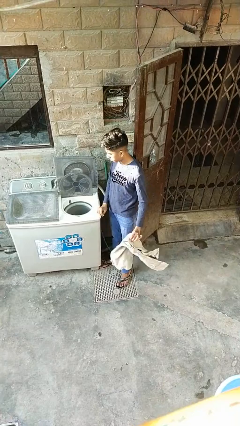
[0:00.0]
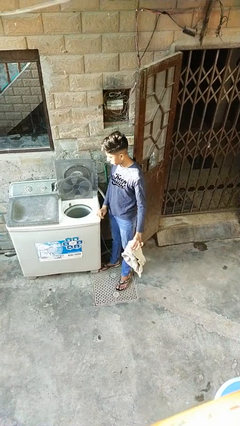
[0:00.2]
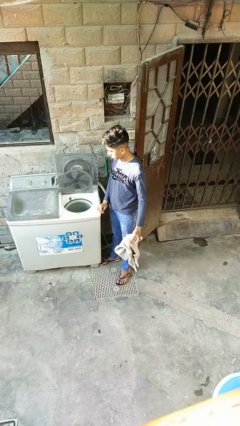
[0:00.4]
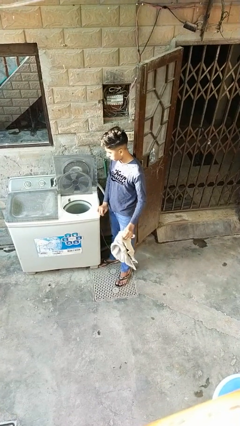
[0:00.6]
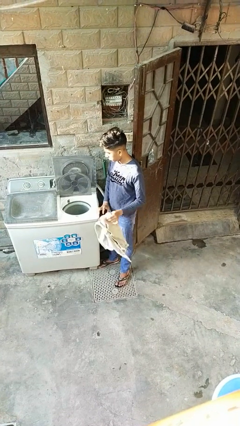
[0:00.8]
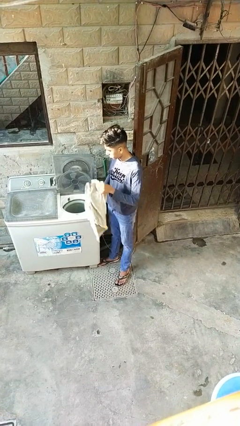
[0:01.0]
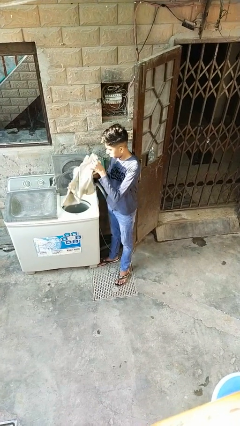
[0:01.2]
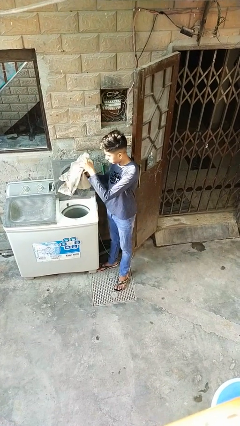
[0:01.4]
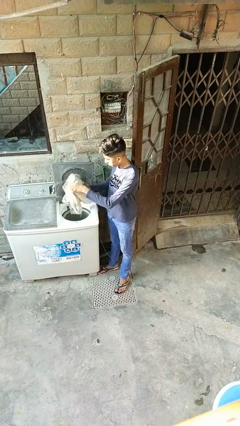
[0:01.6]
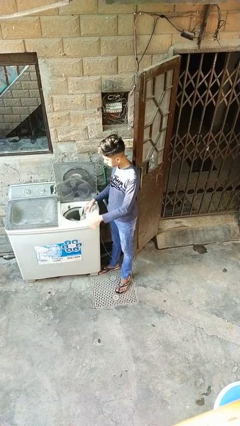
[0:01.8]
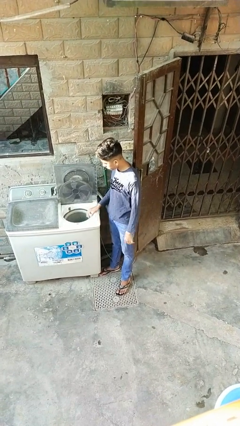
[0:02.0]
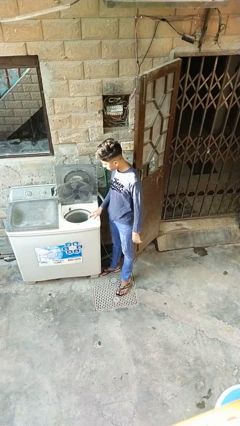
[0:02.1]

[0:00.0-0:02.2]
person loads dryer

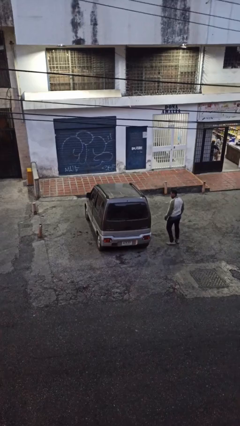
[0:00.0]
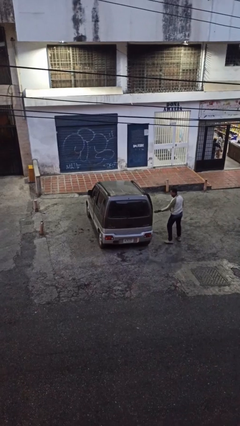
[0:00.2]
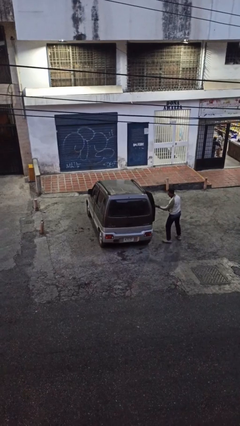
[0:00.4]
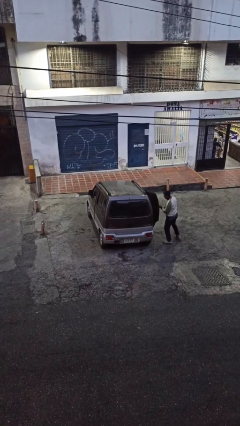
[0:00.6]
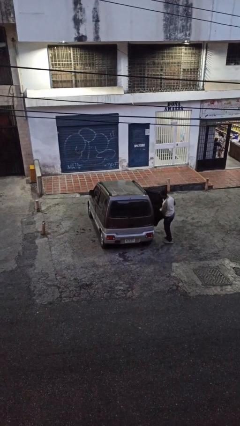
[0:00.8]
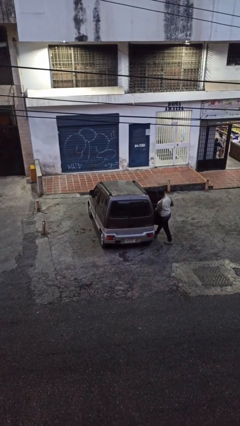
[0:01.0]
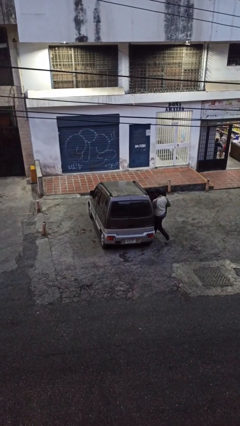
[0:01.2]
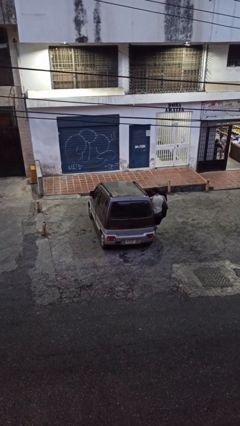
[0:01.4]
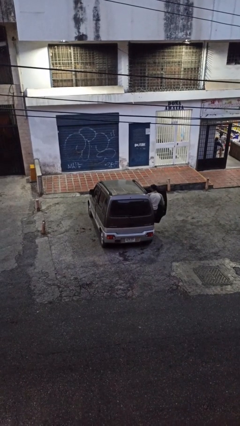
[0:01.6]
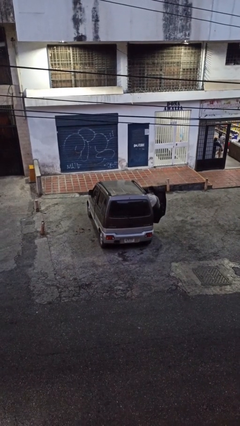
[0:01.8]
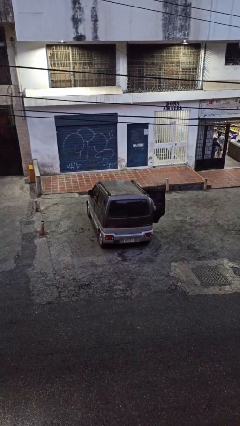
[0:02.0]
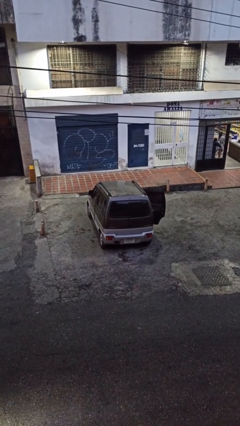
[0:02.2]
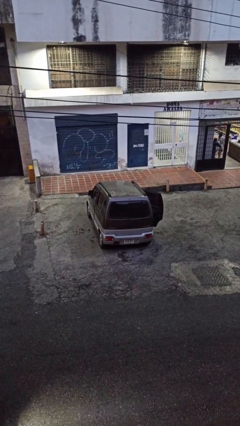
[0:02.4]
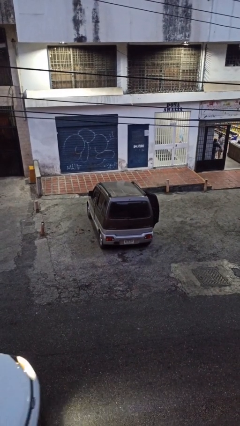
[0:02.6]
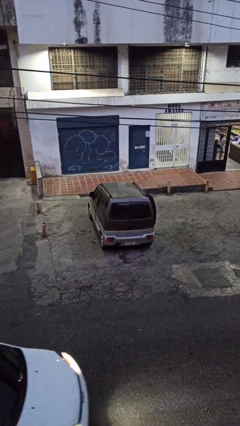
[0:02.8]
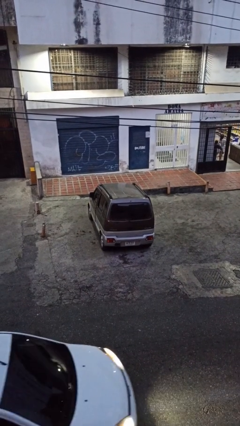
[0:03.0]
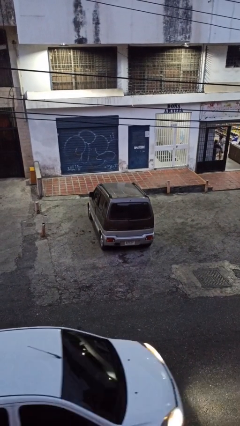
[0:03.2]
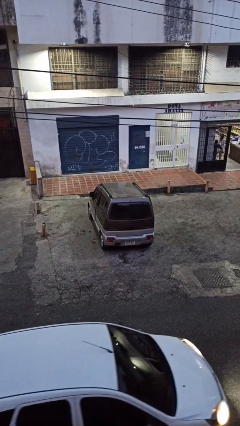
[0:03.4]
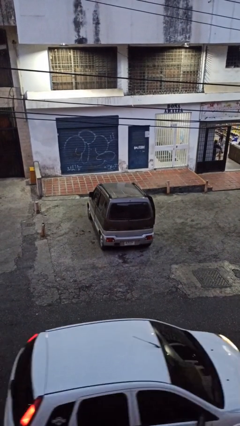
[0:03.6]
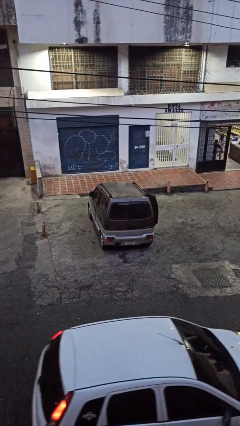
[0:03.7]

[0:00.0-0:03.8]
car picks up person

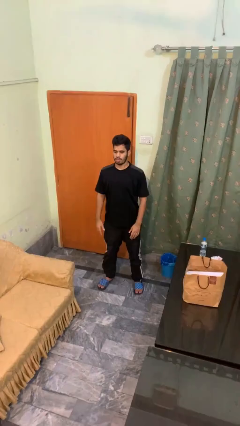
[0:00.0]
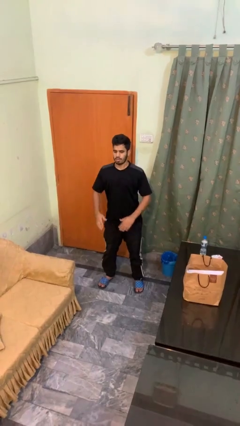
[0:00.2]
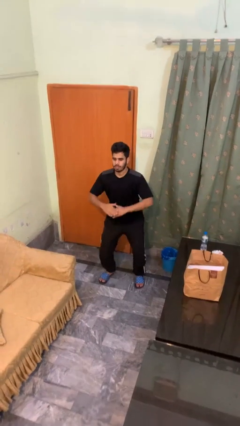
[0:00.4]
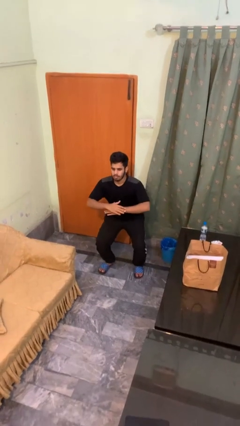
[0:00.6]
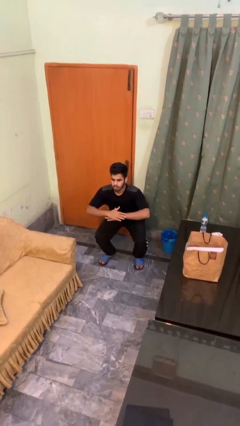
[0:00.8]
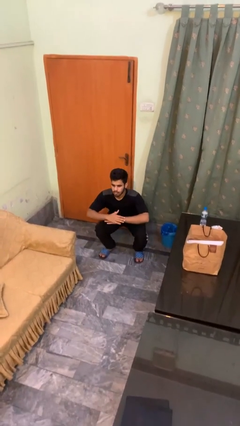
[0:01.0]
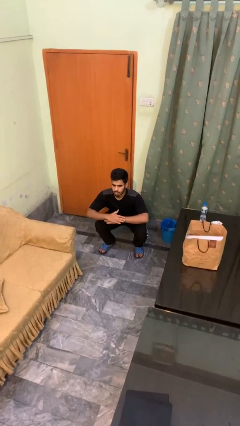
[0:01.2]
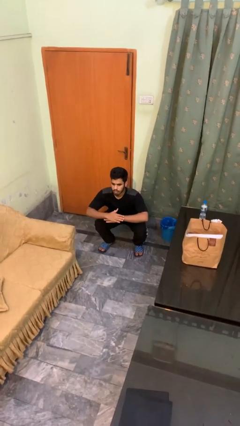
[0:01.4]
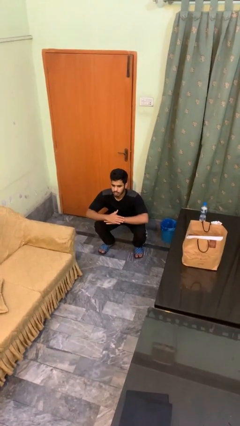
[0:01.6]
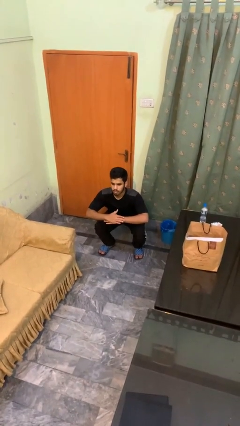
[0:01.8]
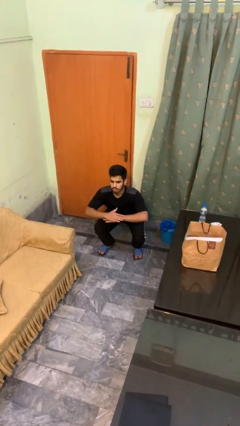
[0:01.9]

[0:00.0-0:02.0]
person squats

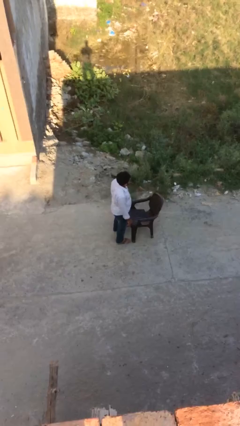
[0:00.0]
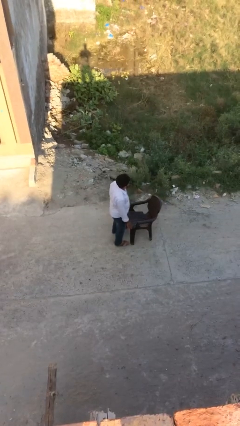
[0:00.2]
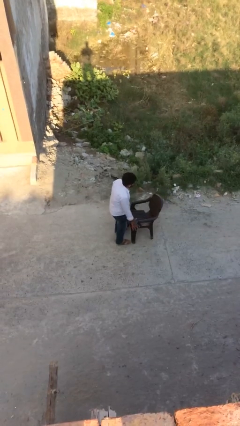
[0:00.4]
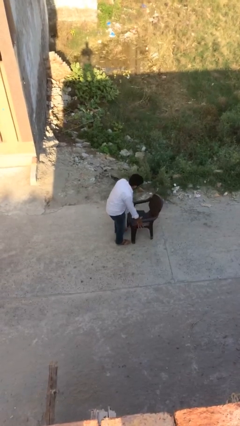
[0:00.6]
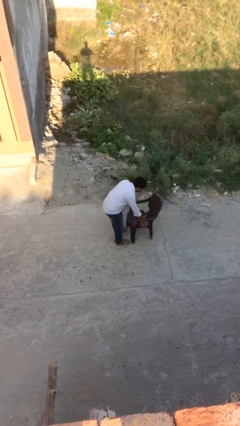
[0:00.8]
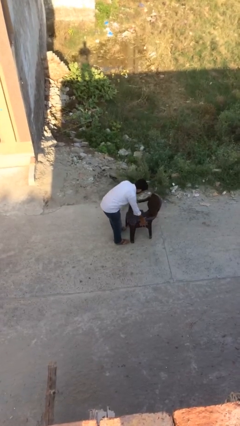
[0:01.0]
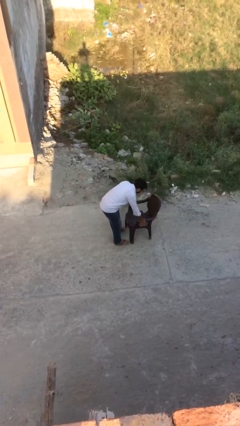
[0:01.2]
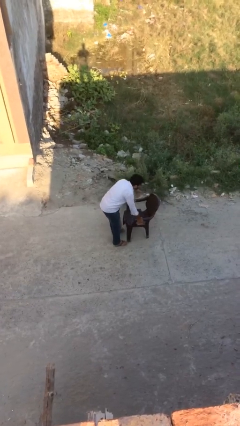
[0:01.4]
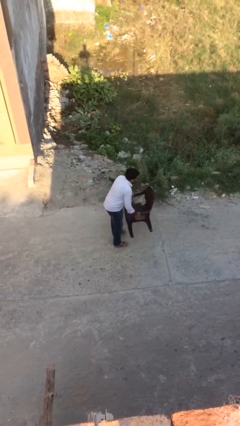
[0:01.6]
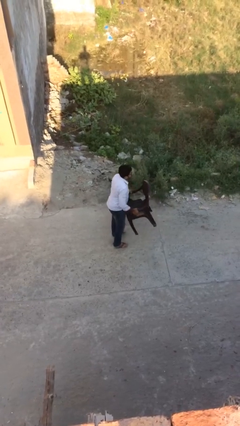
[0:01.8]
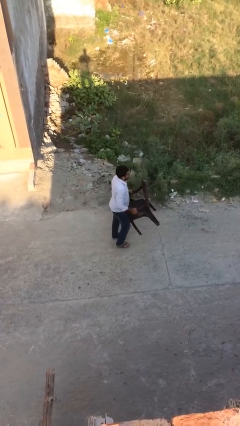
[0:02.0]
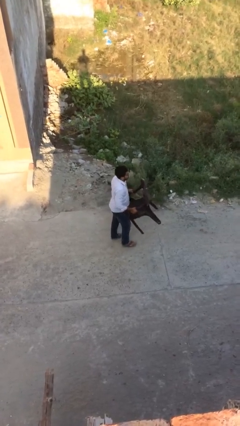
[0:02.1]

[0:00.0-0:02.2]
person picks up object from floor

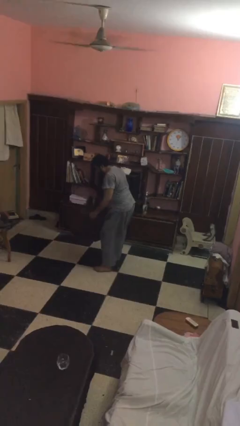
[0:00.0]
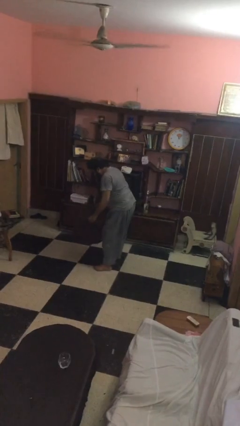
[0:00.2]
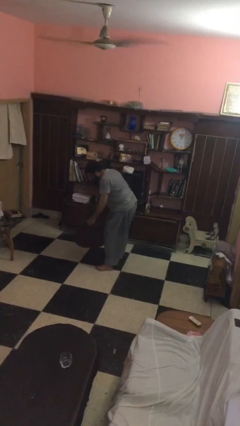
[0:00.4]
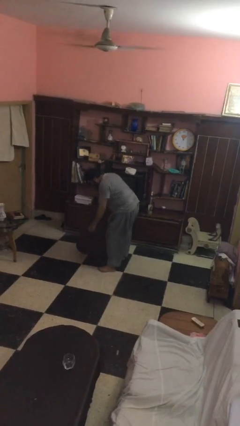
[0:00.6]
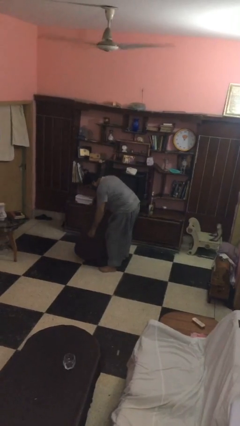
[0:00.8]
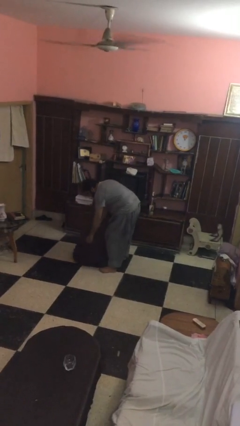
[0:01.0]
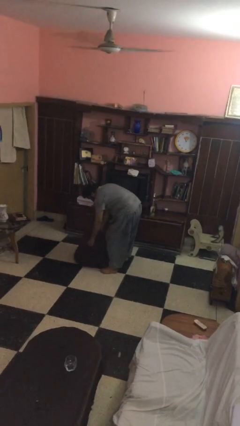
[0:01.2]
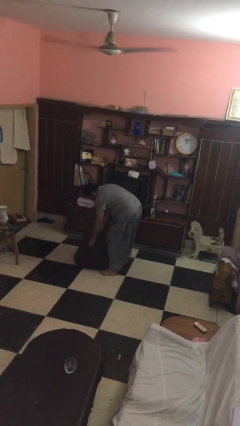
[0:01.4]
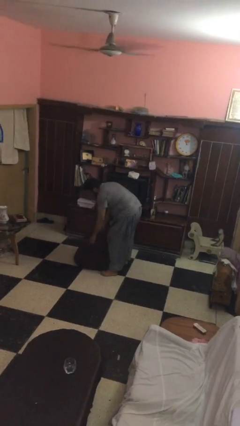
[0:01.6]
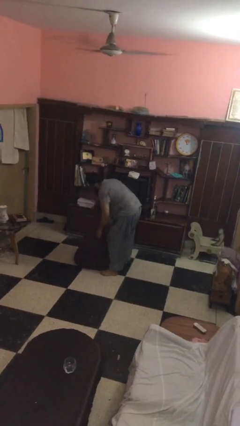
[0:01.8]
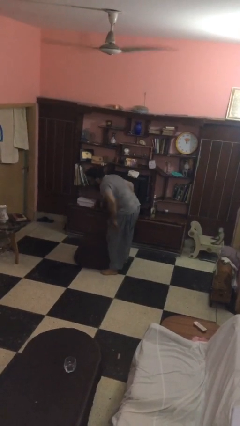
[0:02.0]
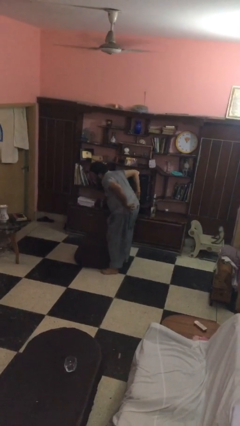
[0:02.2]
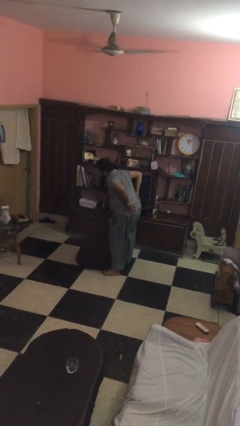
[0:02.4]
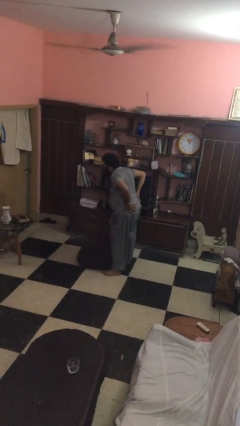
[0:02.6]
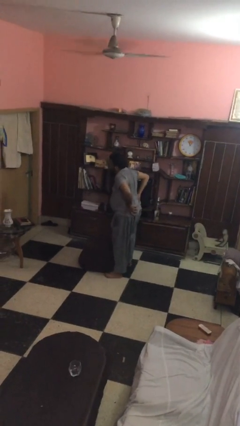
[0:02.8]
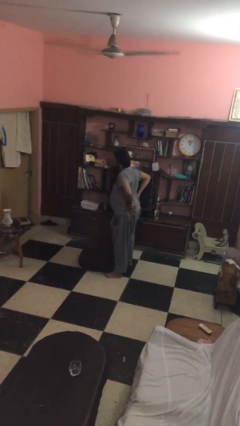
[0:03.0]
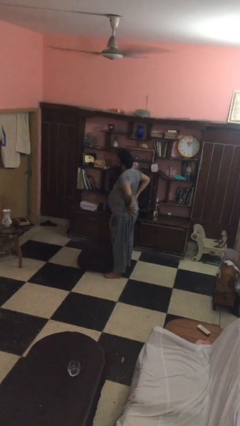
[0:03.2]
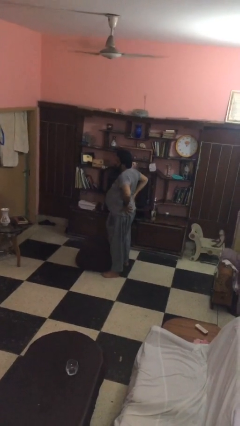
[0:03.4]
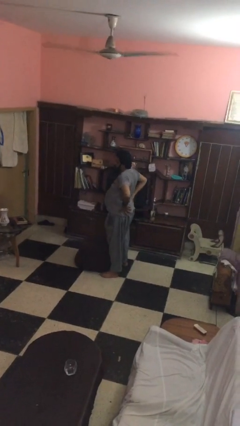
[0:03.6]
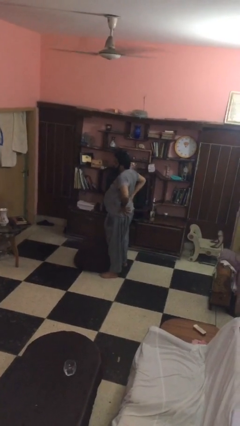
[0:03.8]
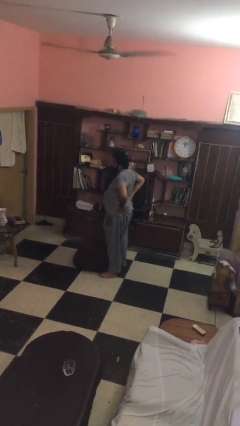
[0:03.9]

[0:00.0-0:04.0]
person puts down object on floor

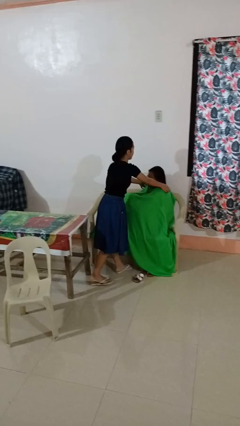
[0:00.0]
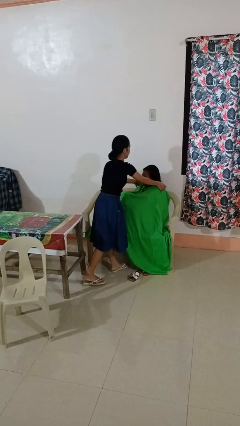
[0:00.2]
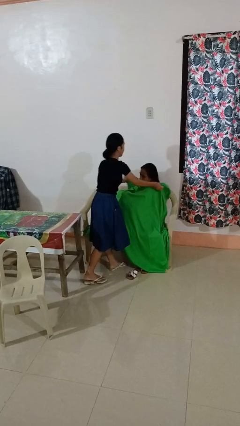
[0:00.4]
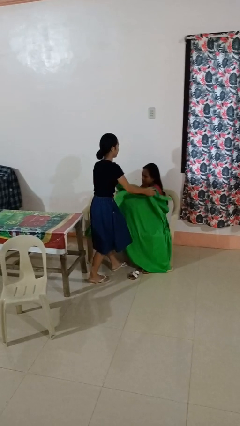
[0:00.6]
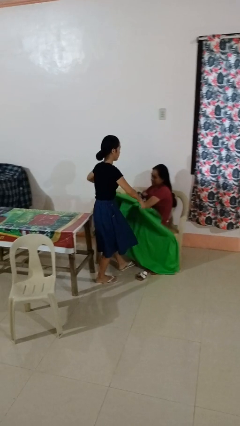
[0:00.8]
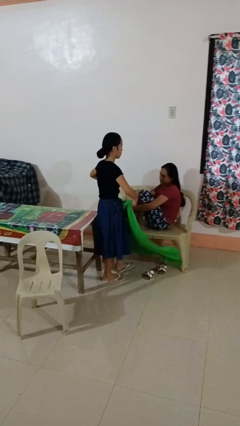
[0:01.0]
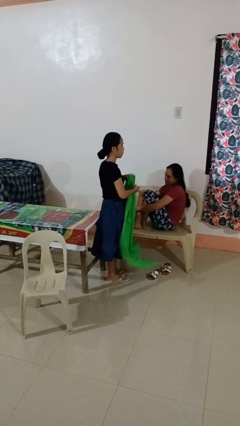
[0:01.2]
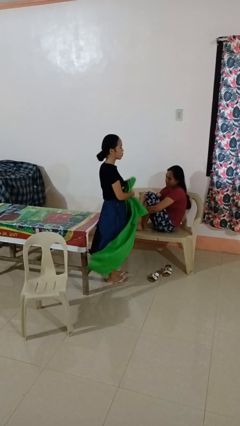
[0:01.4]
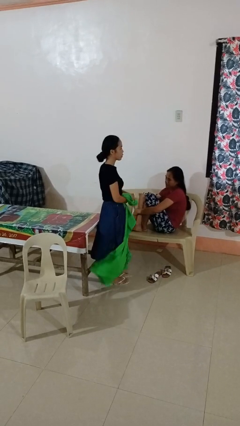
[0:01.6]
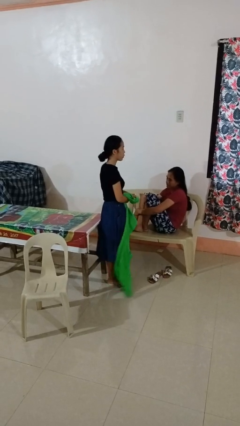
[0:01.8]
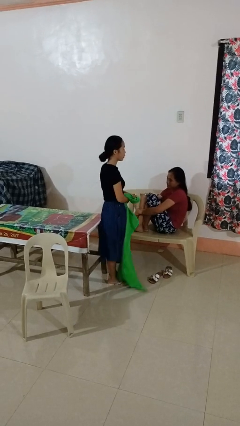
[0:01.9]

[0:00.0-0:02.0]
person uncovers friend with blanket

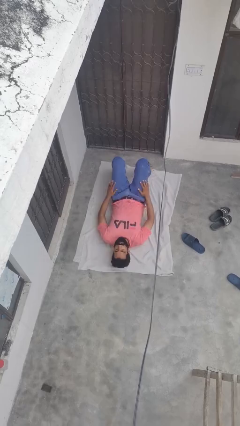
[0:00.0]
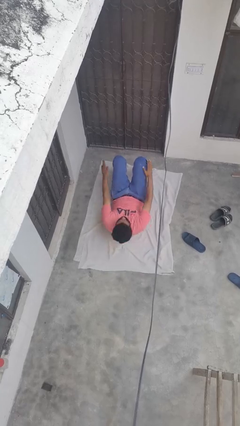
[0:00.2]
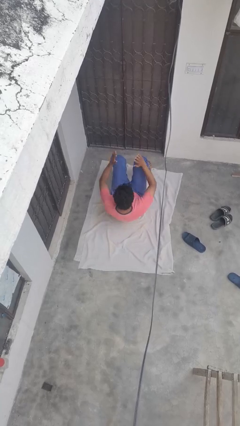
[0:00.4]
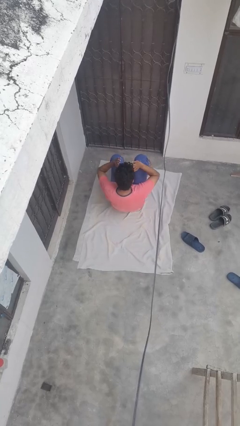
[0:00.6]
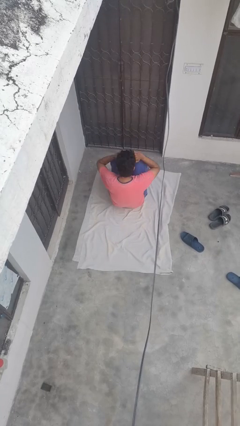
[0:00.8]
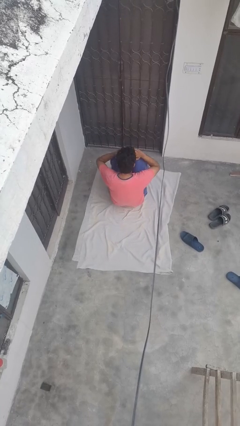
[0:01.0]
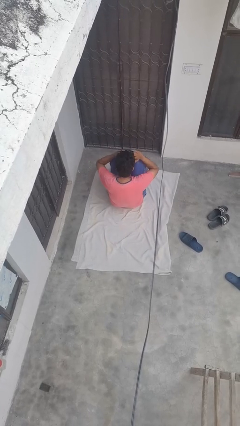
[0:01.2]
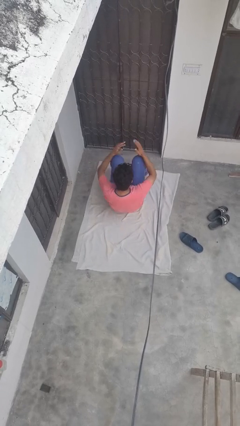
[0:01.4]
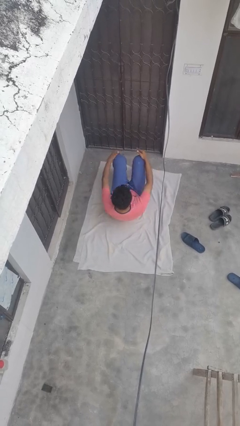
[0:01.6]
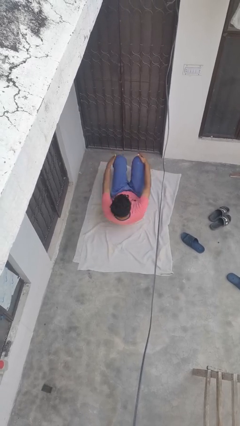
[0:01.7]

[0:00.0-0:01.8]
person exercises with situp
